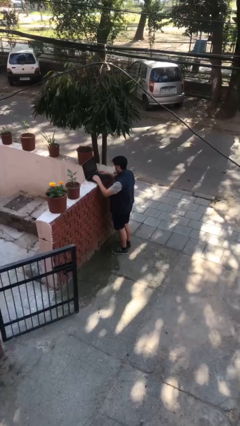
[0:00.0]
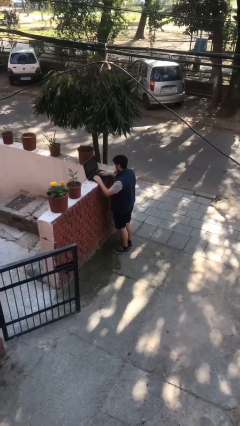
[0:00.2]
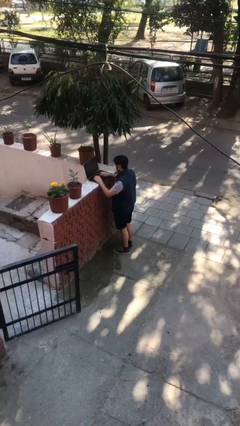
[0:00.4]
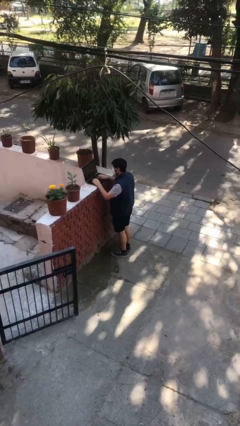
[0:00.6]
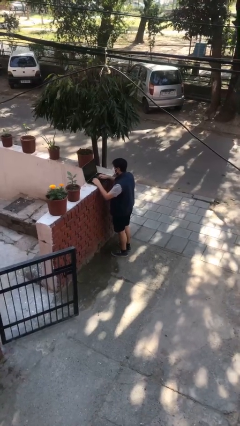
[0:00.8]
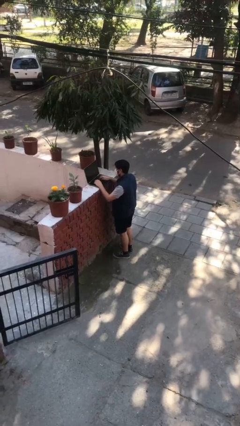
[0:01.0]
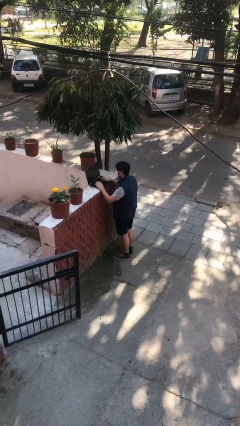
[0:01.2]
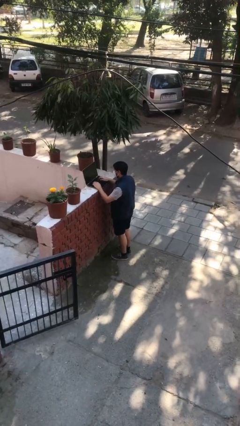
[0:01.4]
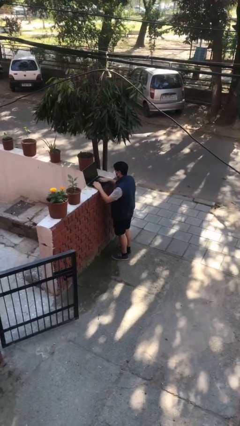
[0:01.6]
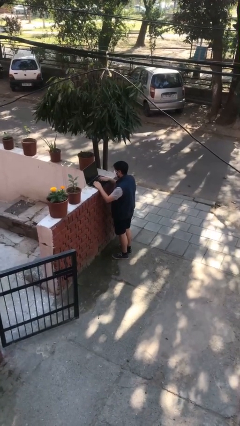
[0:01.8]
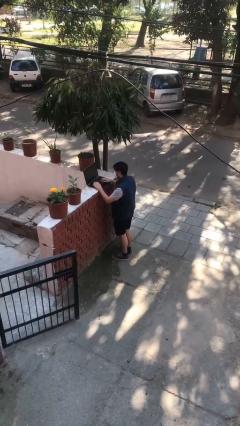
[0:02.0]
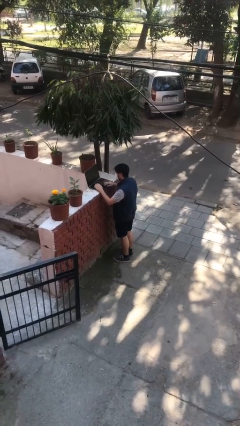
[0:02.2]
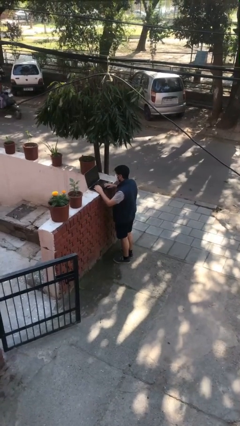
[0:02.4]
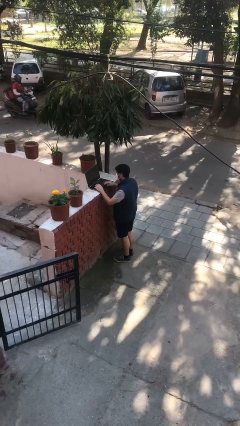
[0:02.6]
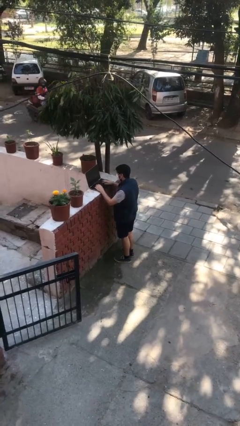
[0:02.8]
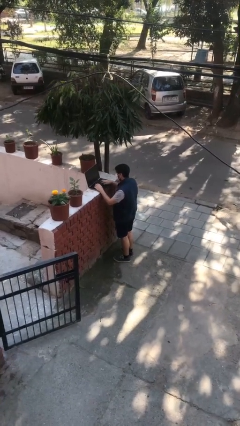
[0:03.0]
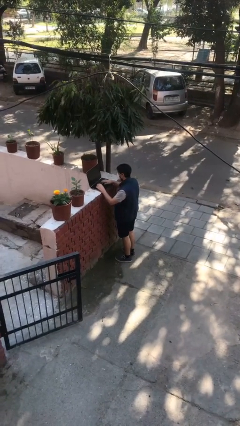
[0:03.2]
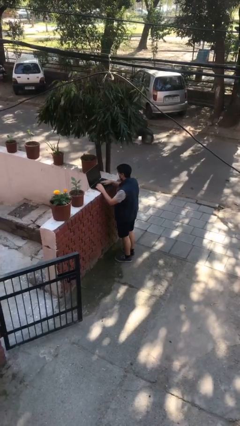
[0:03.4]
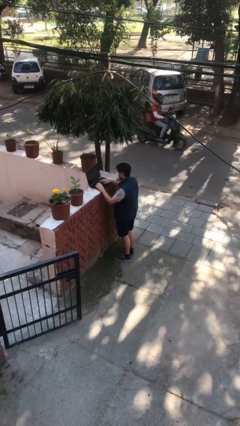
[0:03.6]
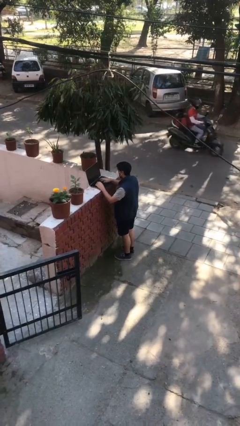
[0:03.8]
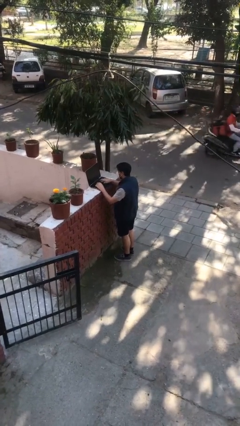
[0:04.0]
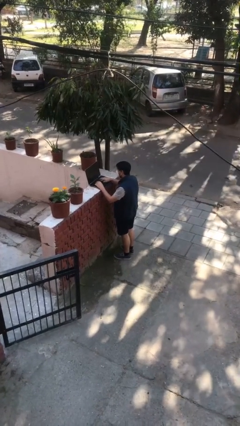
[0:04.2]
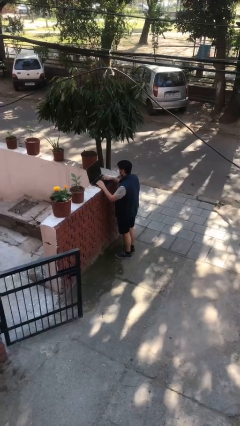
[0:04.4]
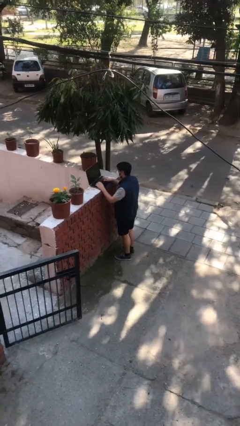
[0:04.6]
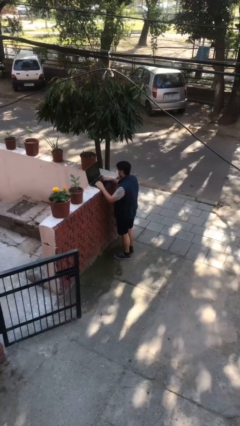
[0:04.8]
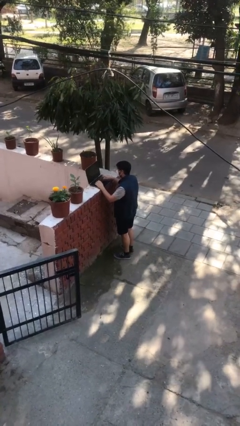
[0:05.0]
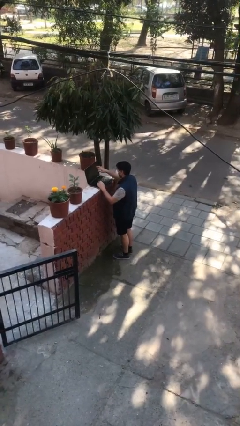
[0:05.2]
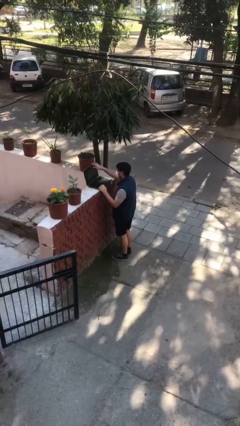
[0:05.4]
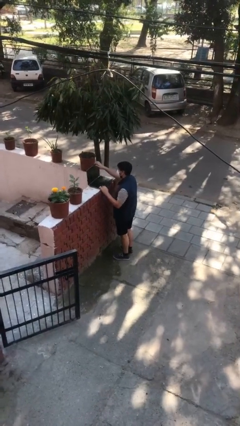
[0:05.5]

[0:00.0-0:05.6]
person interacts with laptop

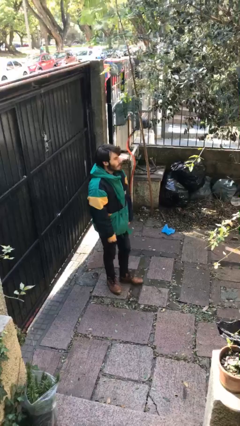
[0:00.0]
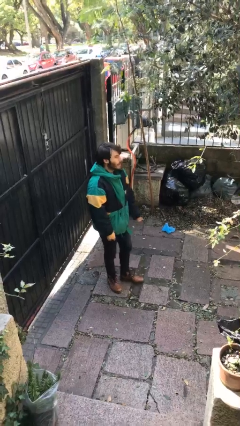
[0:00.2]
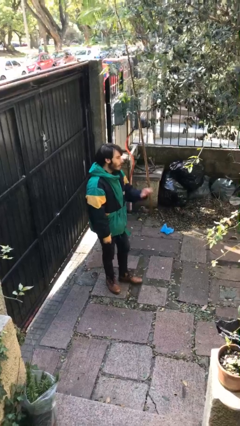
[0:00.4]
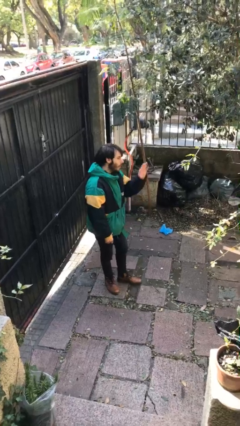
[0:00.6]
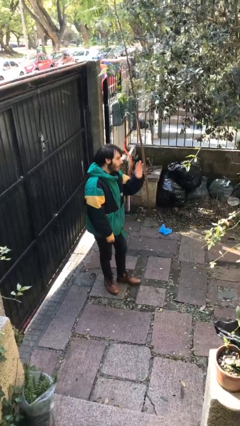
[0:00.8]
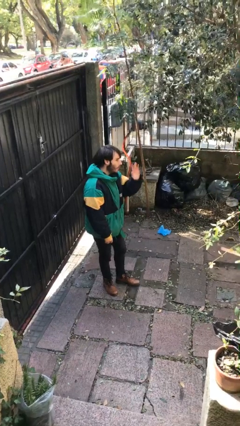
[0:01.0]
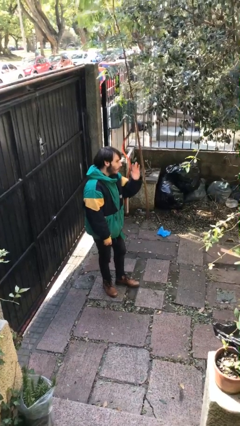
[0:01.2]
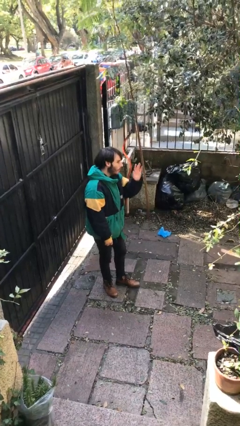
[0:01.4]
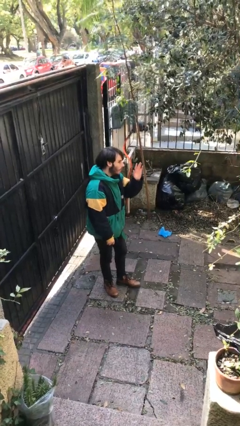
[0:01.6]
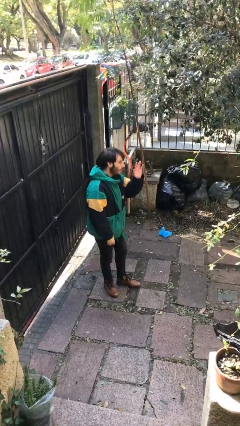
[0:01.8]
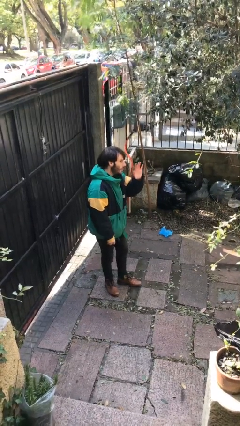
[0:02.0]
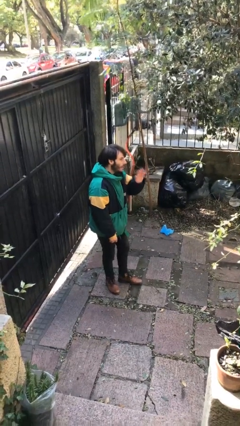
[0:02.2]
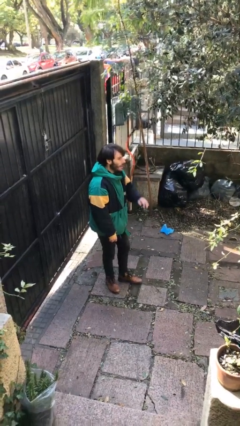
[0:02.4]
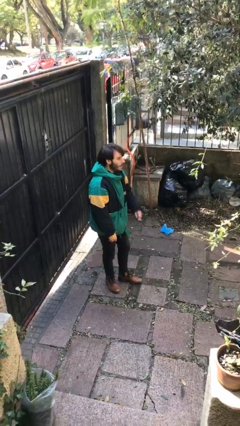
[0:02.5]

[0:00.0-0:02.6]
person waves at person

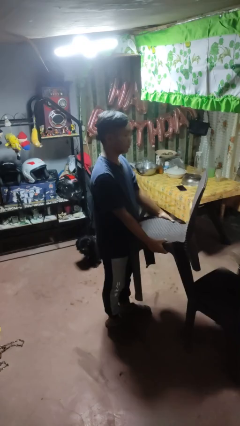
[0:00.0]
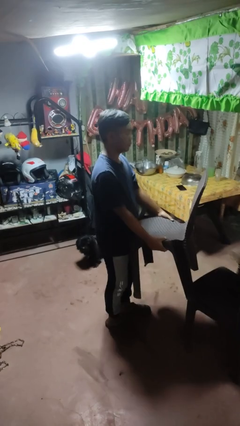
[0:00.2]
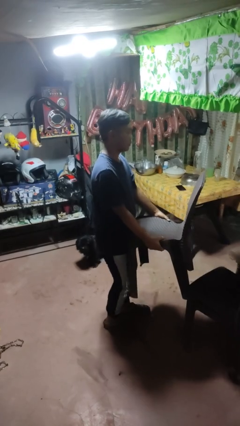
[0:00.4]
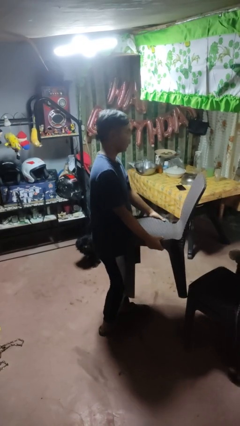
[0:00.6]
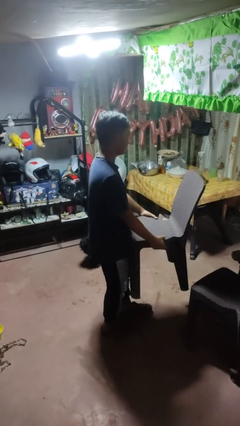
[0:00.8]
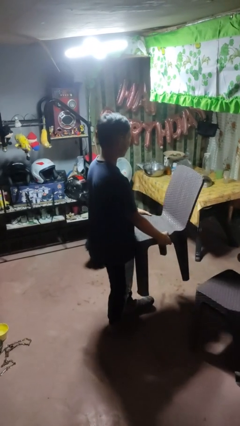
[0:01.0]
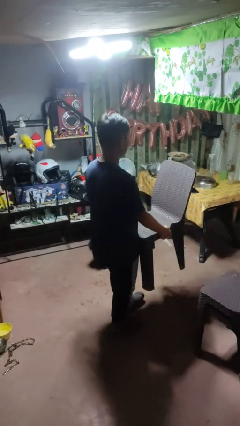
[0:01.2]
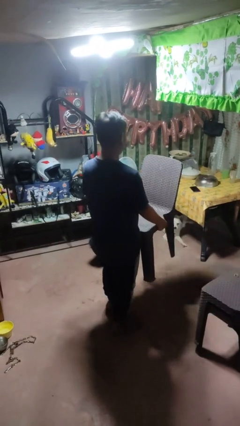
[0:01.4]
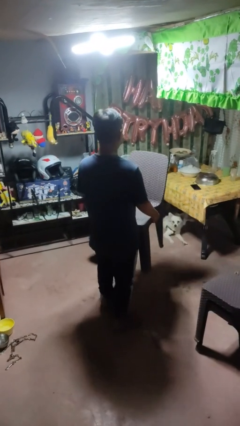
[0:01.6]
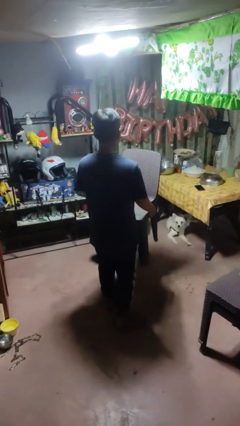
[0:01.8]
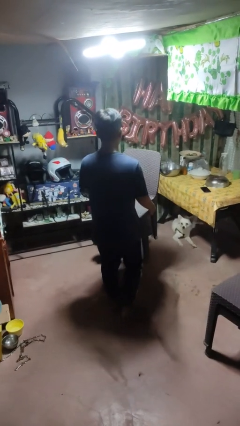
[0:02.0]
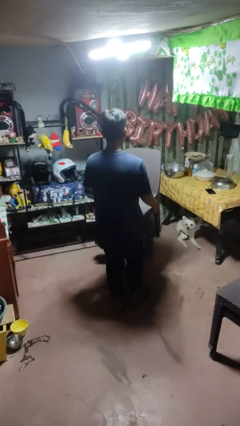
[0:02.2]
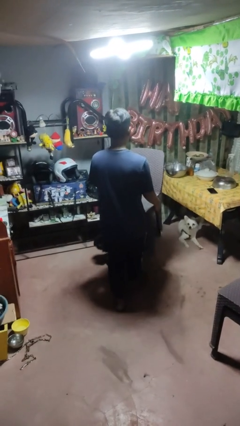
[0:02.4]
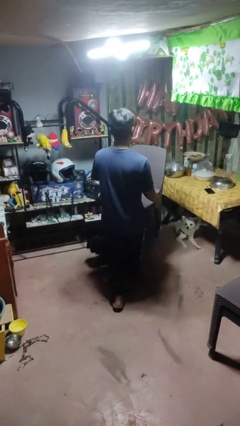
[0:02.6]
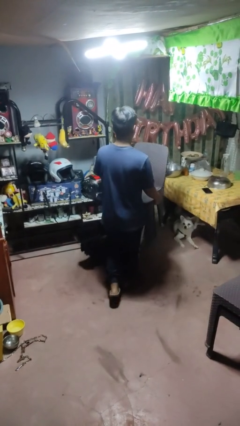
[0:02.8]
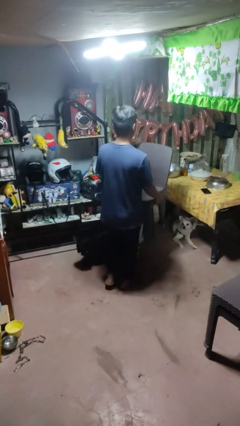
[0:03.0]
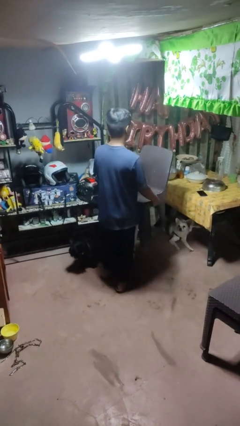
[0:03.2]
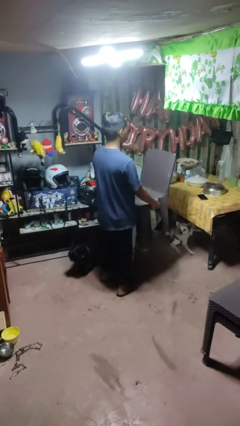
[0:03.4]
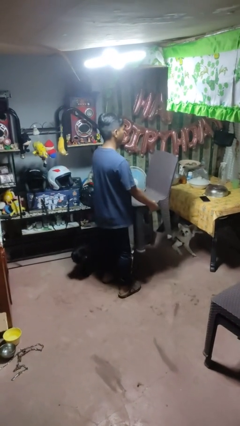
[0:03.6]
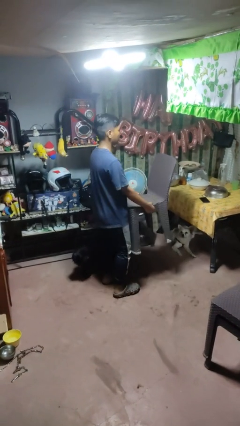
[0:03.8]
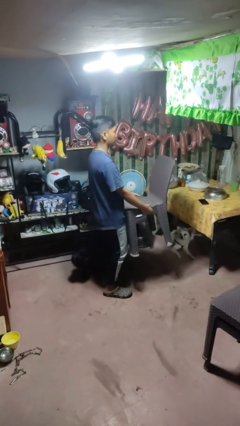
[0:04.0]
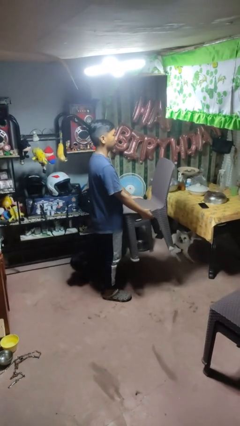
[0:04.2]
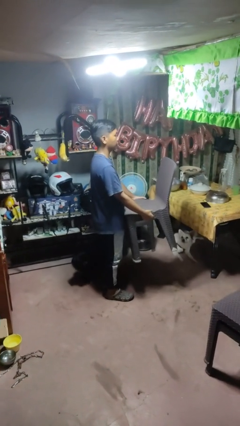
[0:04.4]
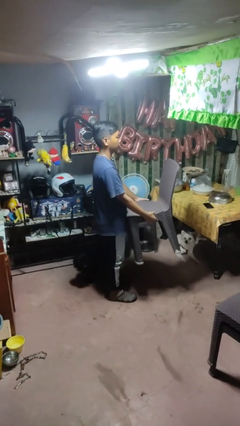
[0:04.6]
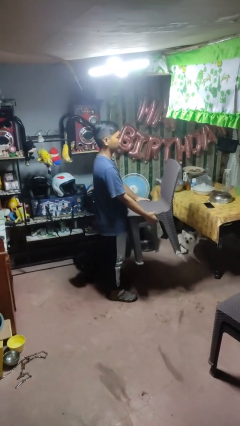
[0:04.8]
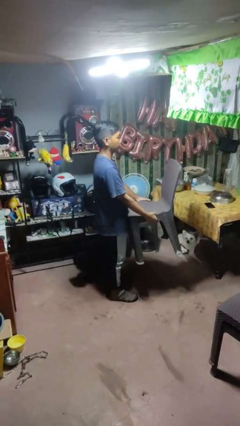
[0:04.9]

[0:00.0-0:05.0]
person carries furniture

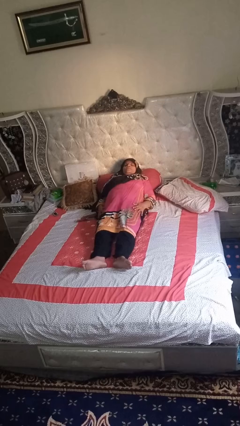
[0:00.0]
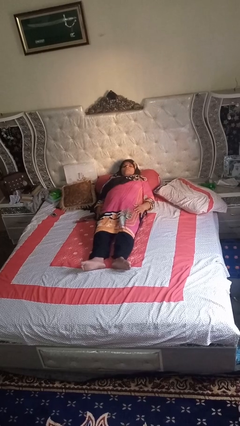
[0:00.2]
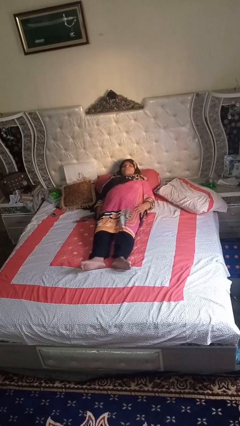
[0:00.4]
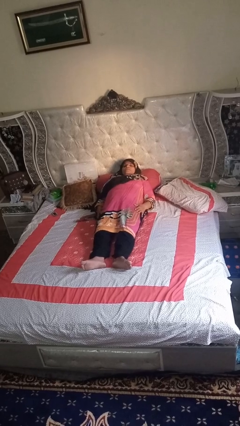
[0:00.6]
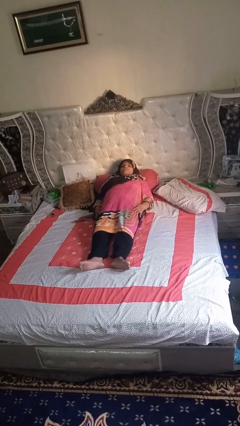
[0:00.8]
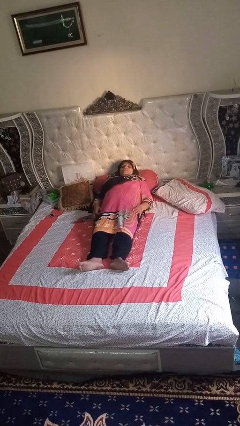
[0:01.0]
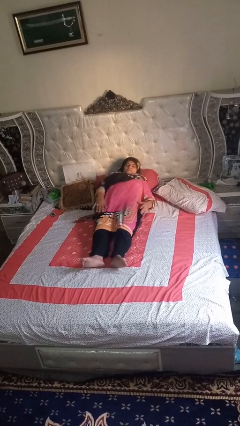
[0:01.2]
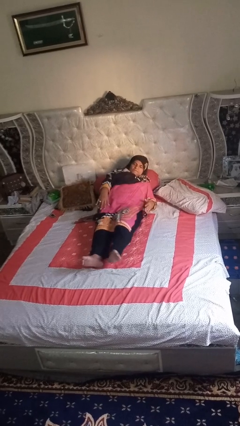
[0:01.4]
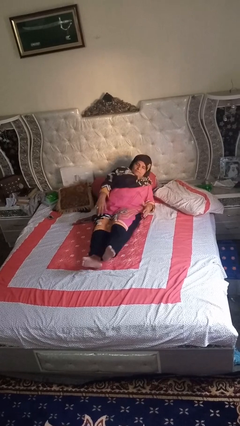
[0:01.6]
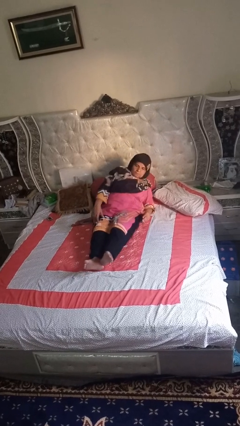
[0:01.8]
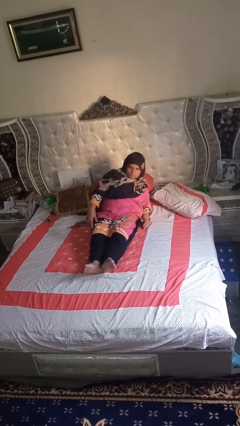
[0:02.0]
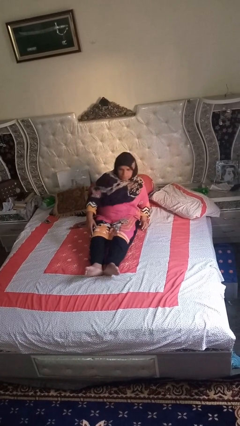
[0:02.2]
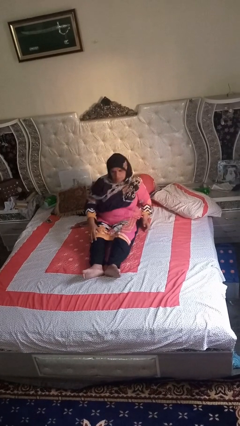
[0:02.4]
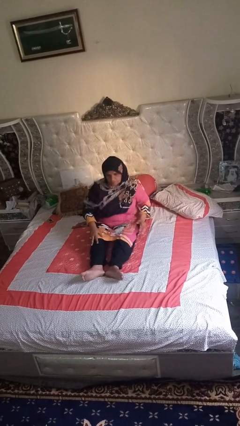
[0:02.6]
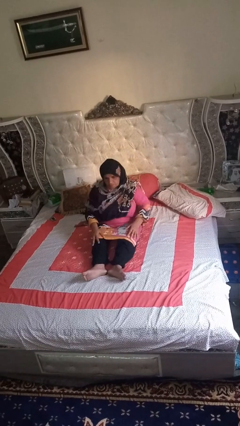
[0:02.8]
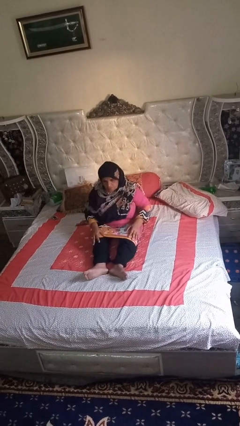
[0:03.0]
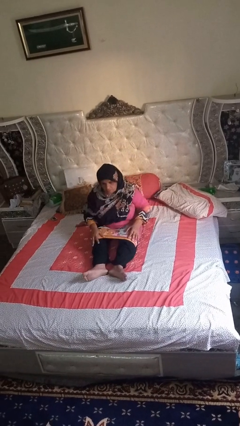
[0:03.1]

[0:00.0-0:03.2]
person stands up

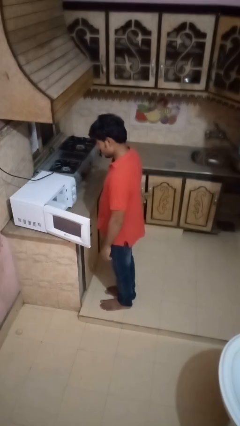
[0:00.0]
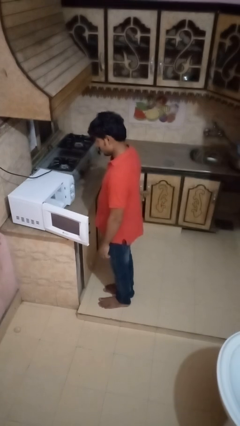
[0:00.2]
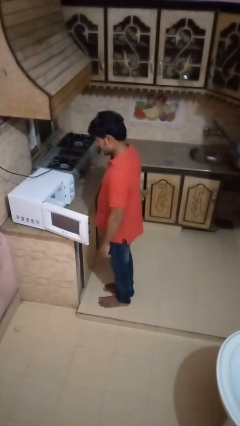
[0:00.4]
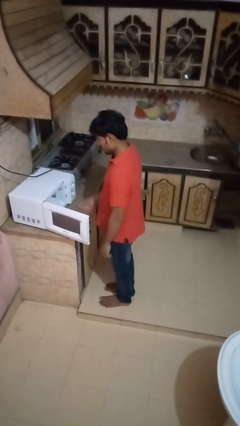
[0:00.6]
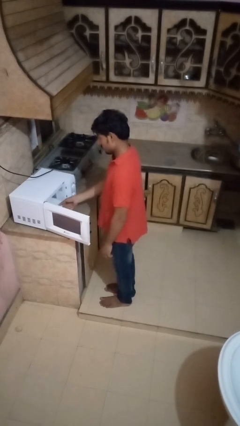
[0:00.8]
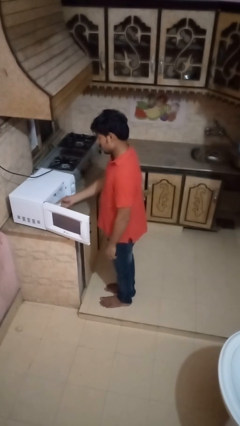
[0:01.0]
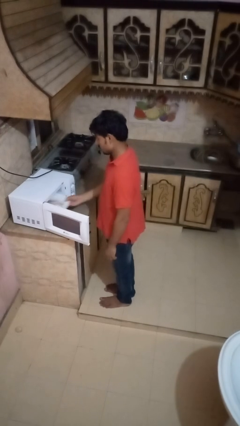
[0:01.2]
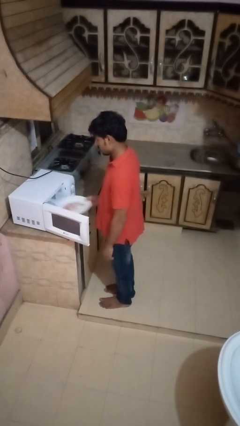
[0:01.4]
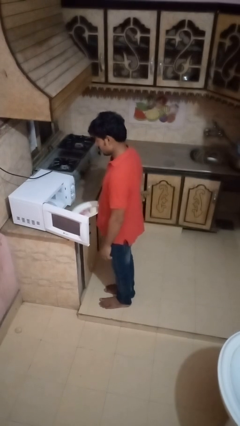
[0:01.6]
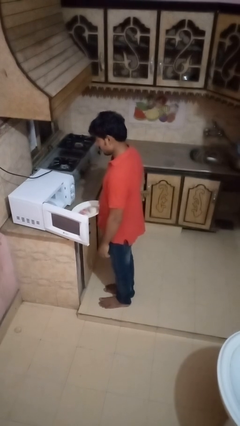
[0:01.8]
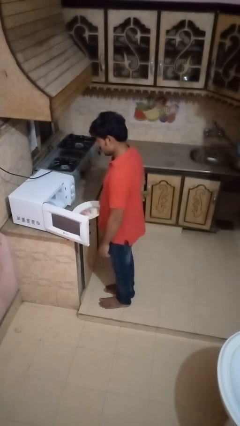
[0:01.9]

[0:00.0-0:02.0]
person takes object from oven
